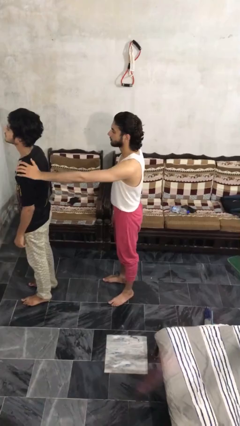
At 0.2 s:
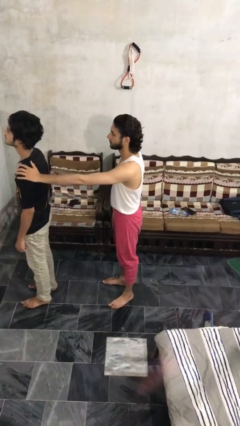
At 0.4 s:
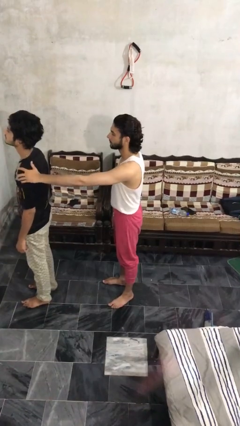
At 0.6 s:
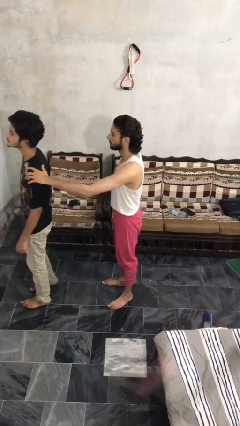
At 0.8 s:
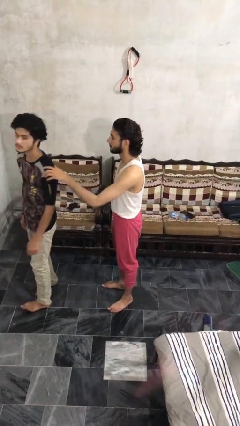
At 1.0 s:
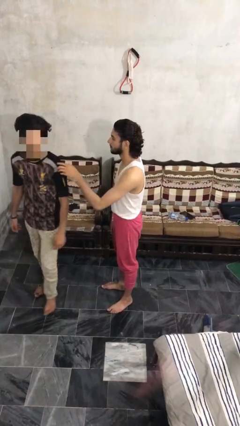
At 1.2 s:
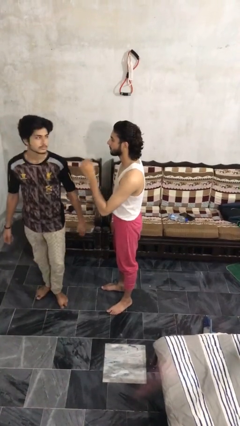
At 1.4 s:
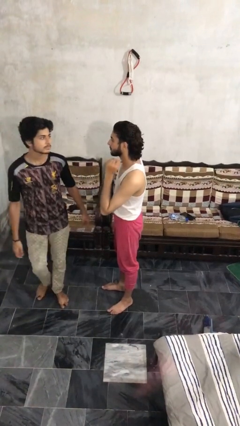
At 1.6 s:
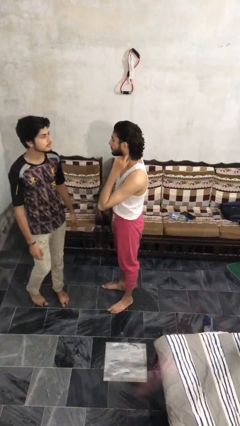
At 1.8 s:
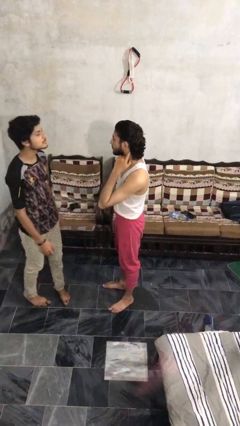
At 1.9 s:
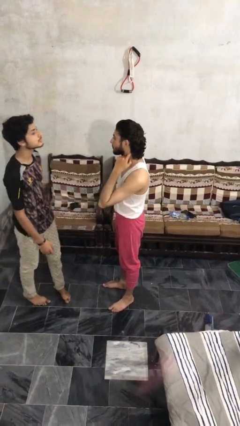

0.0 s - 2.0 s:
person spins person around

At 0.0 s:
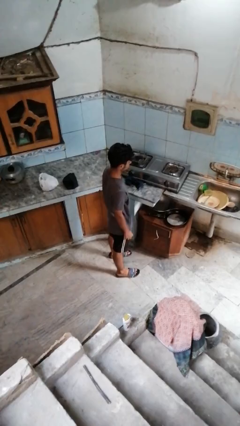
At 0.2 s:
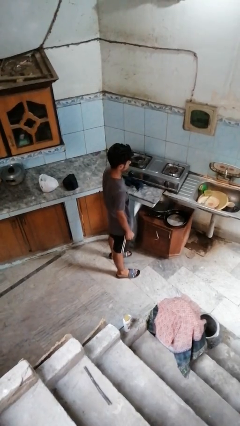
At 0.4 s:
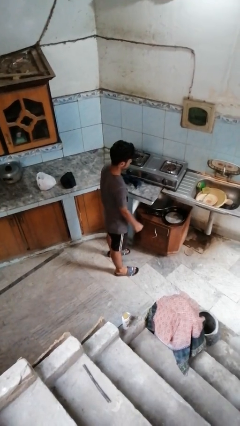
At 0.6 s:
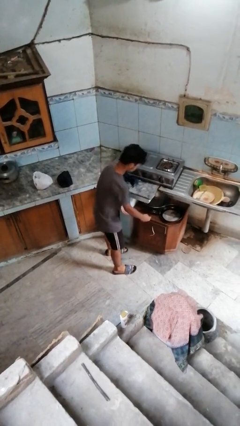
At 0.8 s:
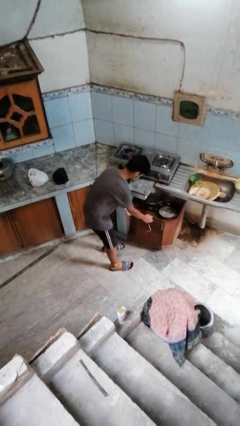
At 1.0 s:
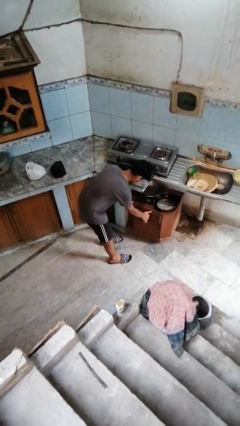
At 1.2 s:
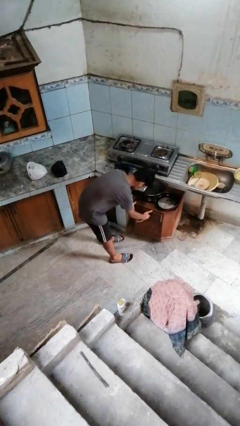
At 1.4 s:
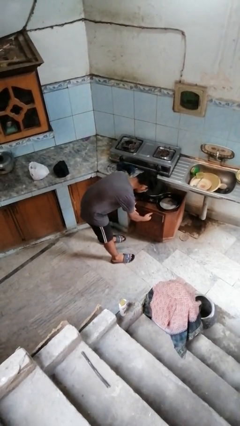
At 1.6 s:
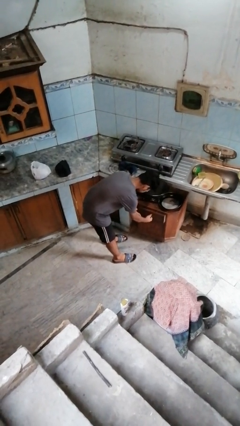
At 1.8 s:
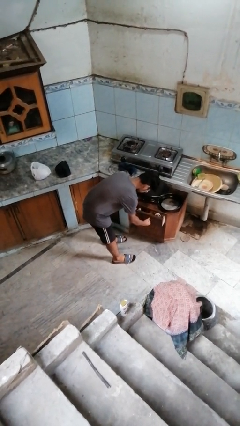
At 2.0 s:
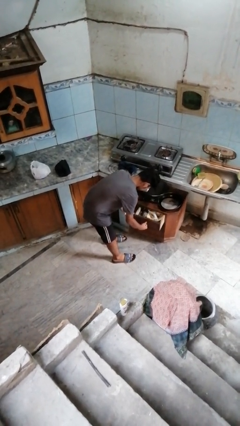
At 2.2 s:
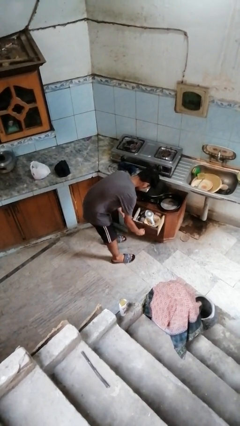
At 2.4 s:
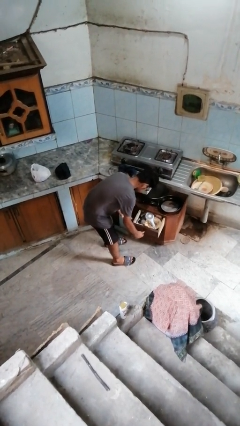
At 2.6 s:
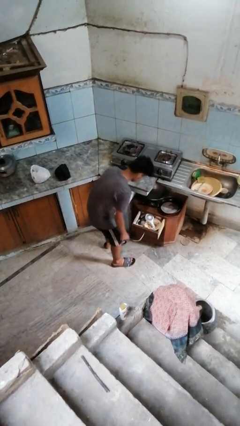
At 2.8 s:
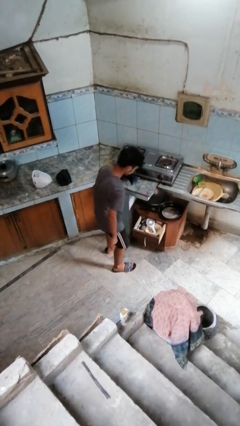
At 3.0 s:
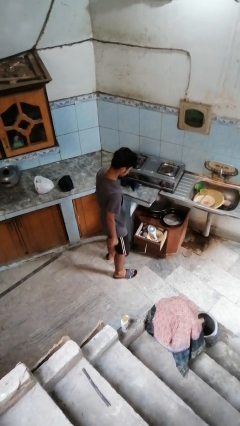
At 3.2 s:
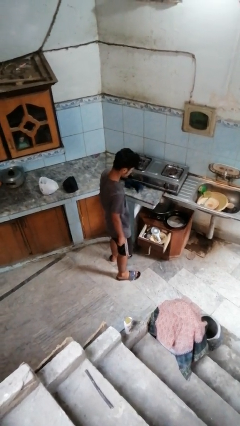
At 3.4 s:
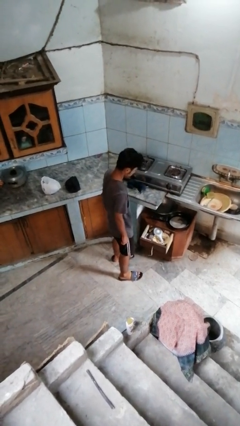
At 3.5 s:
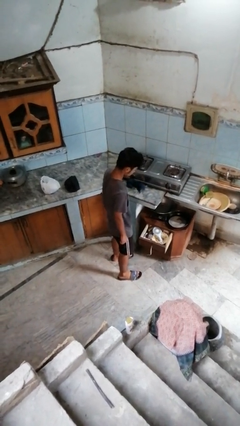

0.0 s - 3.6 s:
person opens kitchen drawer

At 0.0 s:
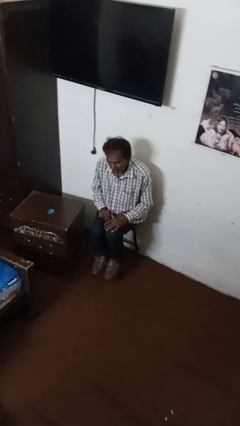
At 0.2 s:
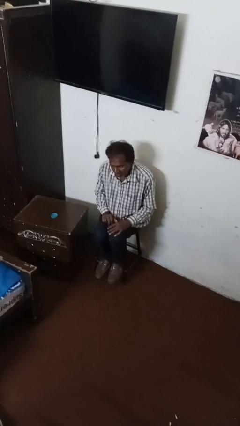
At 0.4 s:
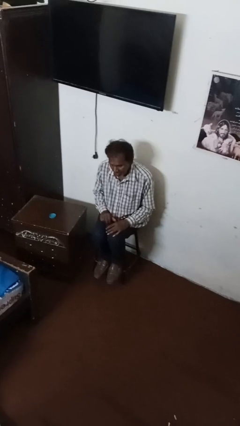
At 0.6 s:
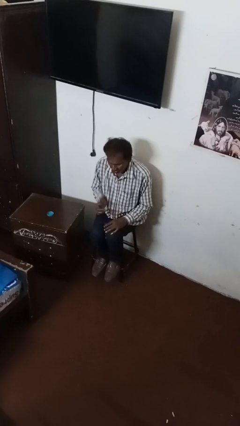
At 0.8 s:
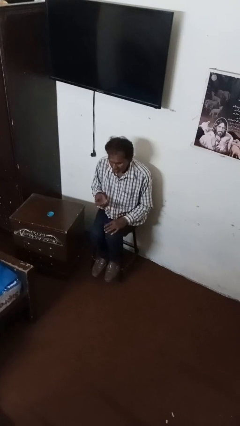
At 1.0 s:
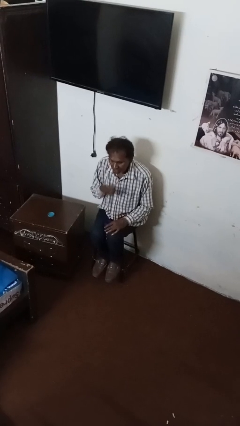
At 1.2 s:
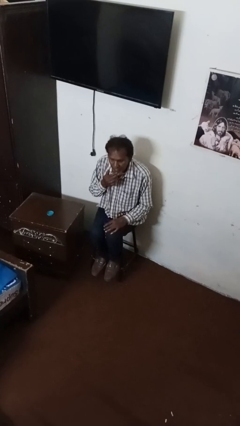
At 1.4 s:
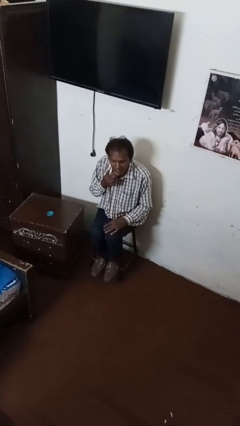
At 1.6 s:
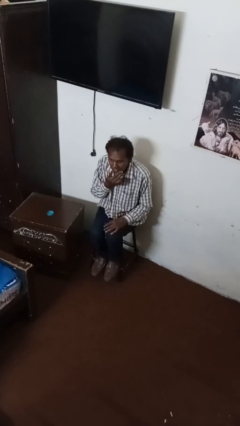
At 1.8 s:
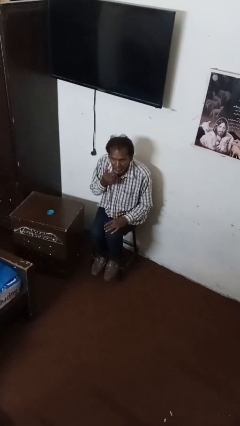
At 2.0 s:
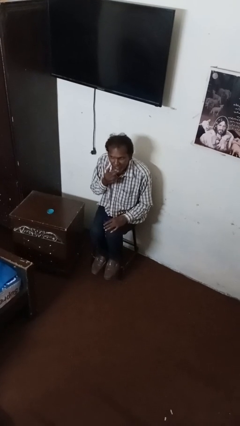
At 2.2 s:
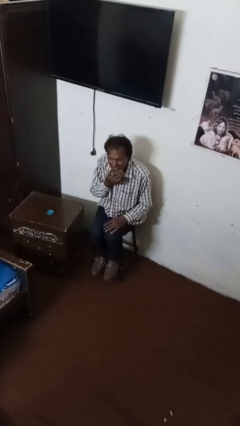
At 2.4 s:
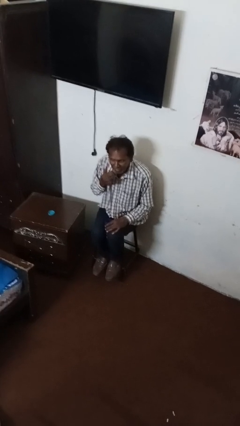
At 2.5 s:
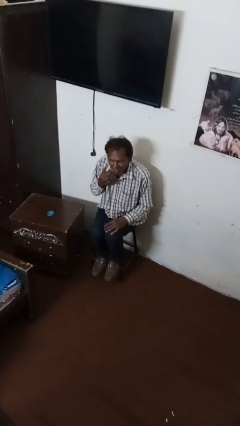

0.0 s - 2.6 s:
person strokes chin

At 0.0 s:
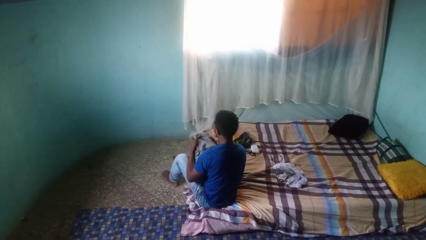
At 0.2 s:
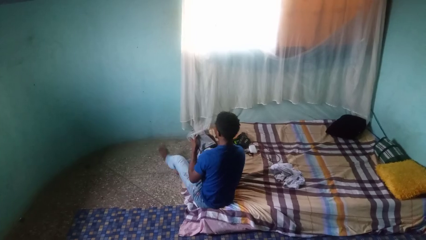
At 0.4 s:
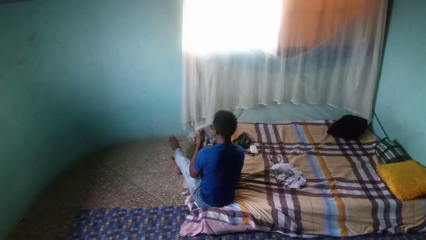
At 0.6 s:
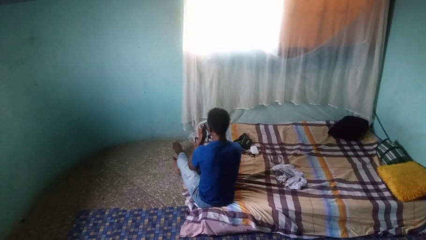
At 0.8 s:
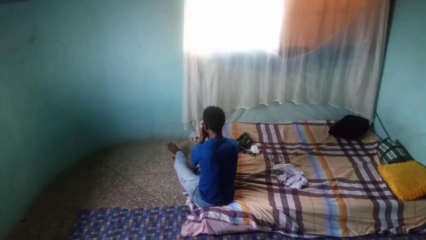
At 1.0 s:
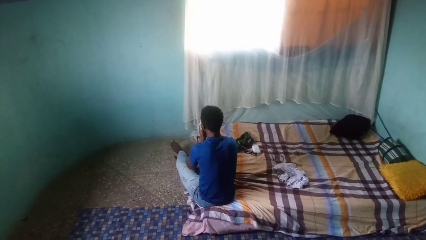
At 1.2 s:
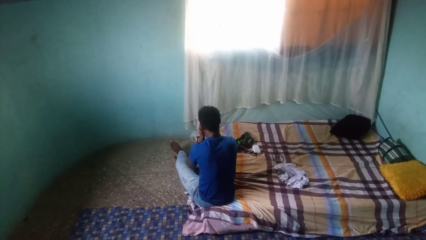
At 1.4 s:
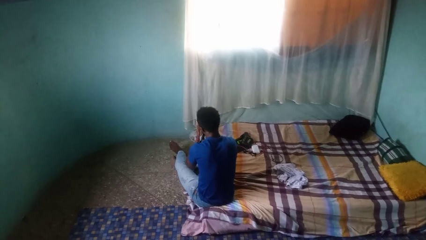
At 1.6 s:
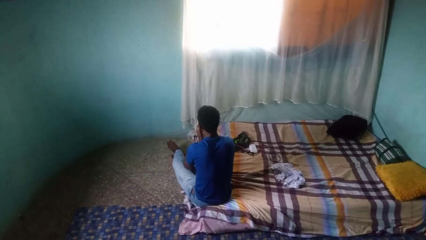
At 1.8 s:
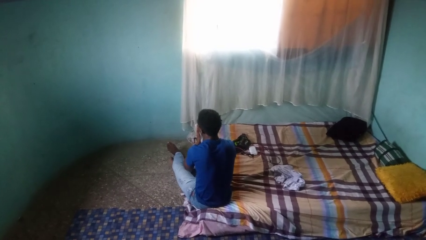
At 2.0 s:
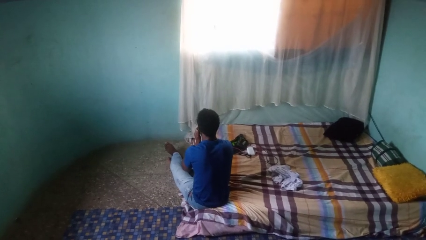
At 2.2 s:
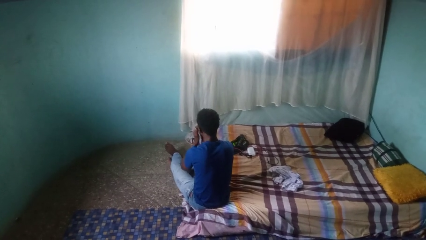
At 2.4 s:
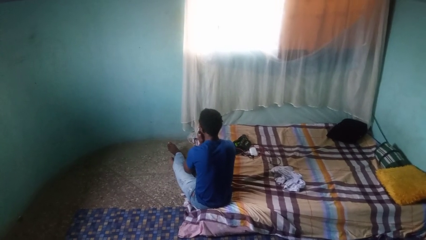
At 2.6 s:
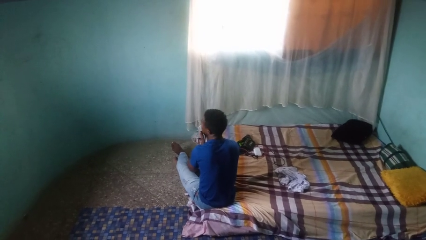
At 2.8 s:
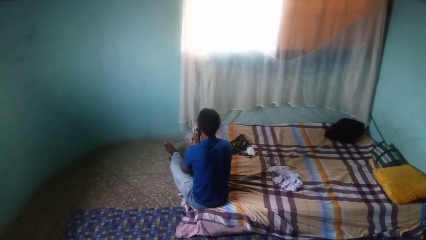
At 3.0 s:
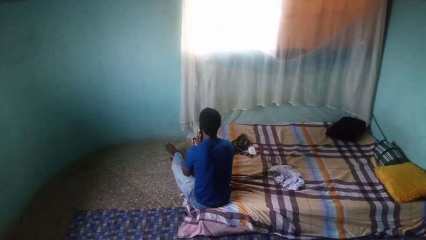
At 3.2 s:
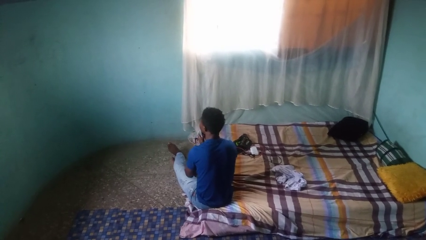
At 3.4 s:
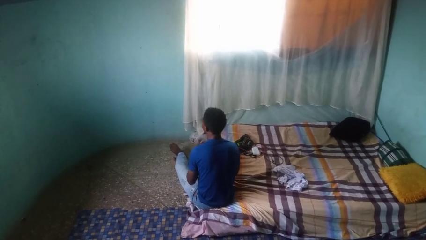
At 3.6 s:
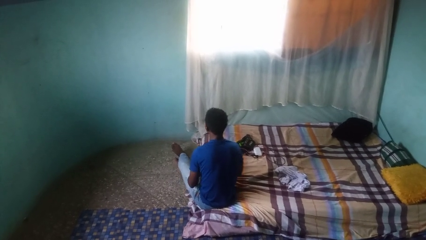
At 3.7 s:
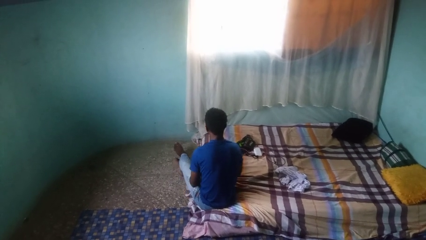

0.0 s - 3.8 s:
person wipes mouth with napkin

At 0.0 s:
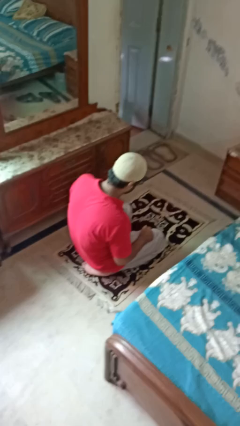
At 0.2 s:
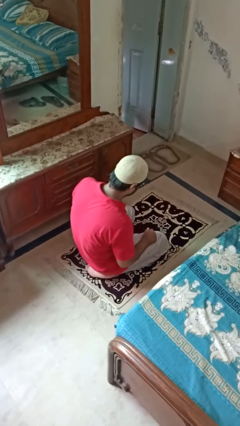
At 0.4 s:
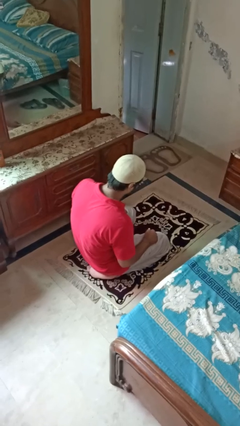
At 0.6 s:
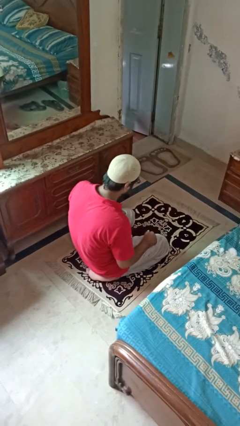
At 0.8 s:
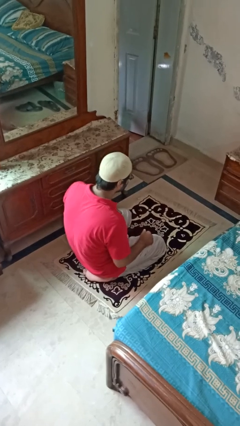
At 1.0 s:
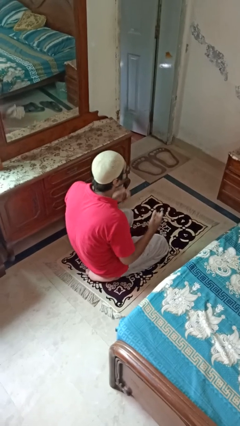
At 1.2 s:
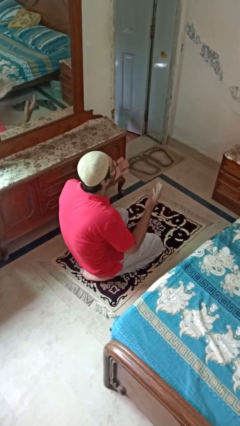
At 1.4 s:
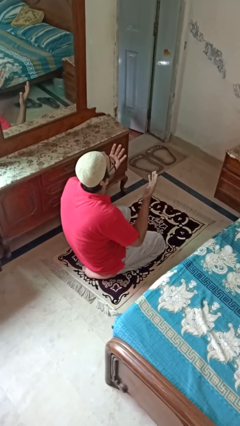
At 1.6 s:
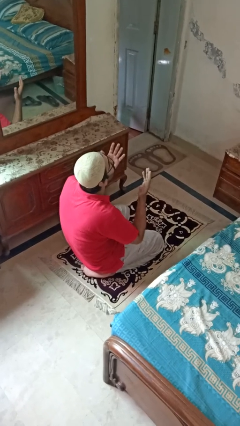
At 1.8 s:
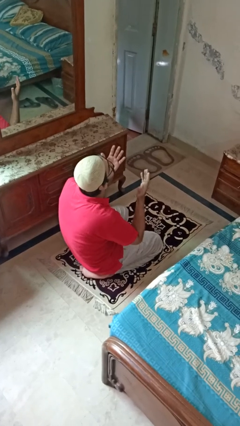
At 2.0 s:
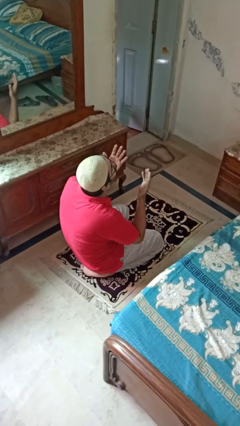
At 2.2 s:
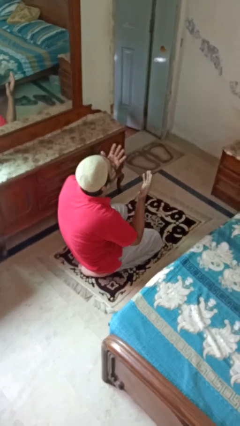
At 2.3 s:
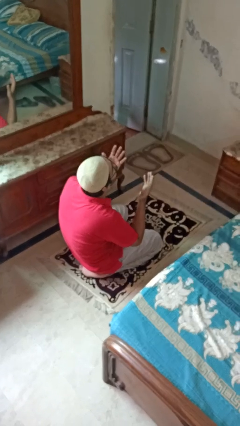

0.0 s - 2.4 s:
person prays

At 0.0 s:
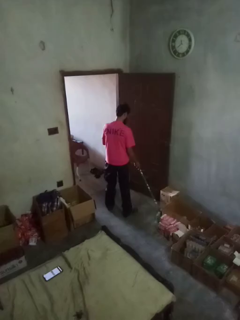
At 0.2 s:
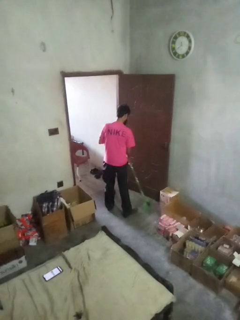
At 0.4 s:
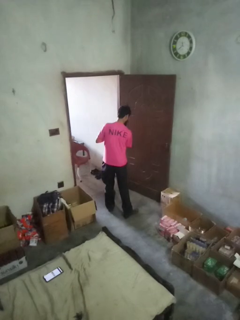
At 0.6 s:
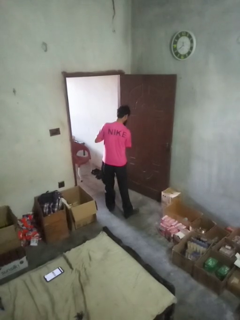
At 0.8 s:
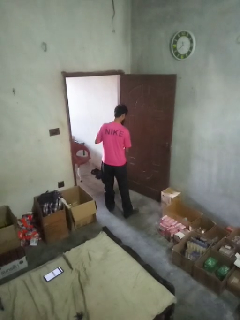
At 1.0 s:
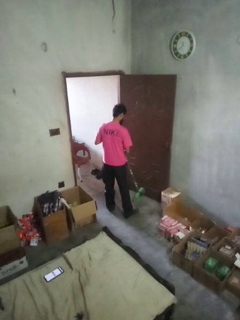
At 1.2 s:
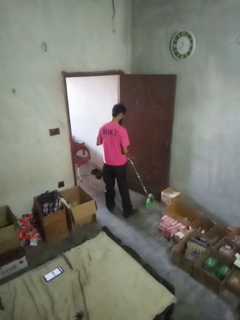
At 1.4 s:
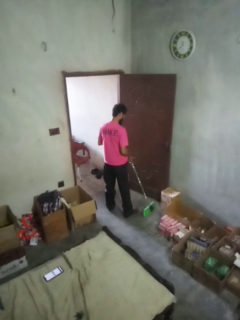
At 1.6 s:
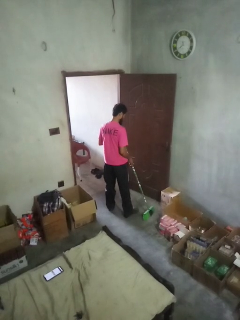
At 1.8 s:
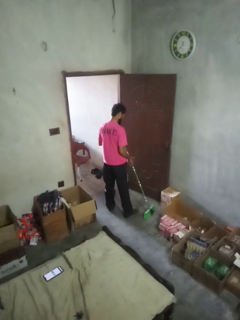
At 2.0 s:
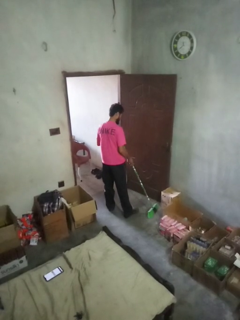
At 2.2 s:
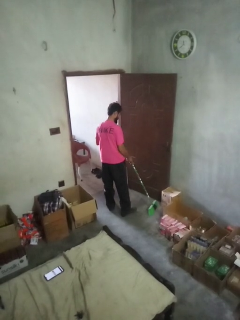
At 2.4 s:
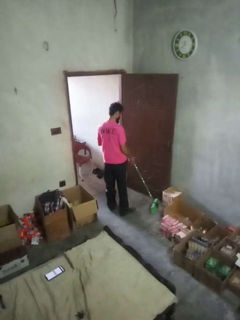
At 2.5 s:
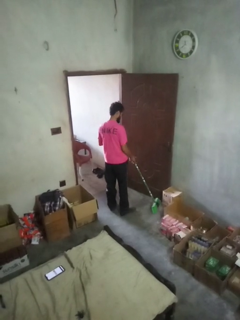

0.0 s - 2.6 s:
person sweeps floor

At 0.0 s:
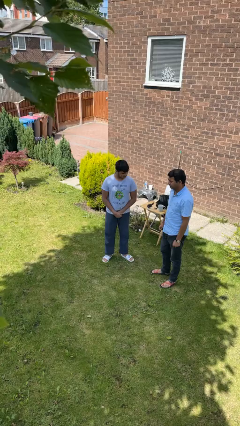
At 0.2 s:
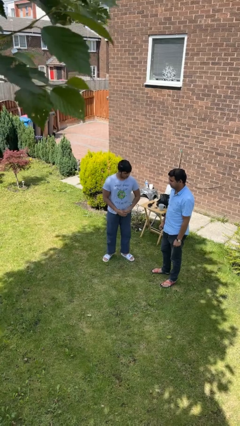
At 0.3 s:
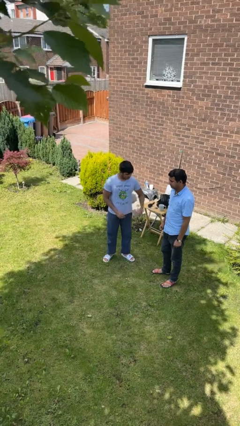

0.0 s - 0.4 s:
person grabs person by bicep

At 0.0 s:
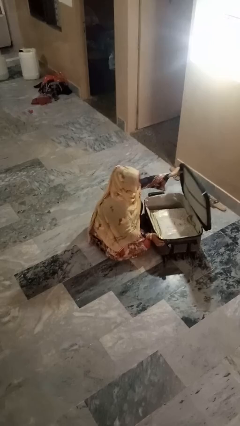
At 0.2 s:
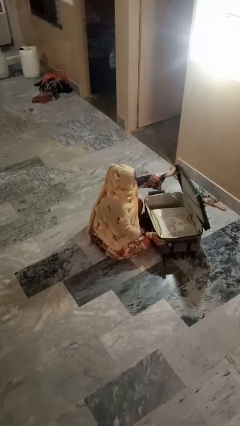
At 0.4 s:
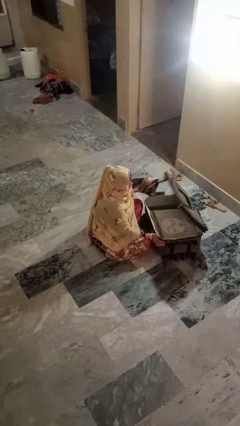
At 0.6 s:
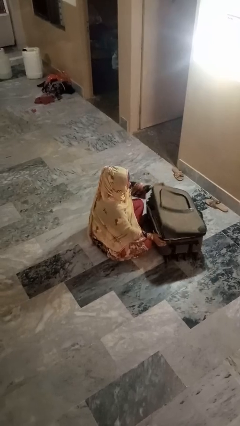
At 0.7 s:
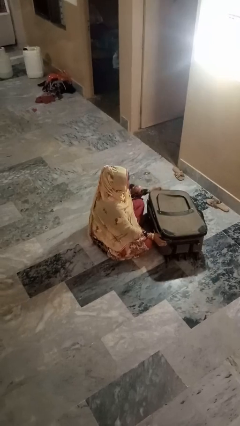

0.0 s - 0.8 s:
person closes suitcase
